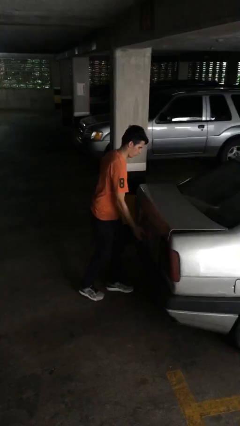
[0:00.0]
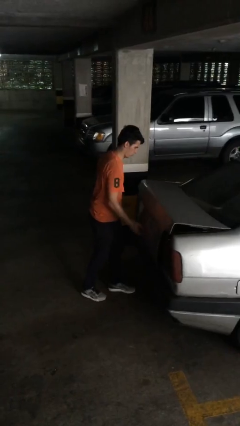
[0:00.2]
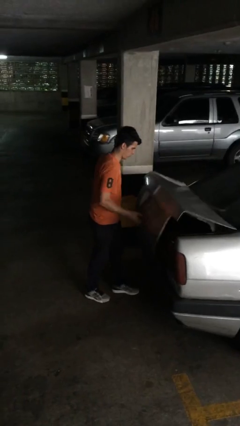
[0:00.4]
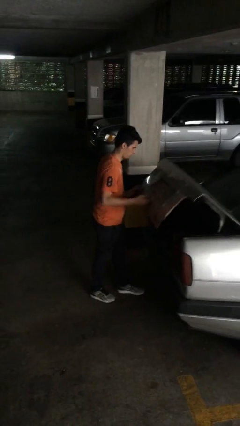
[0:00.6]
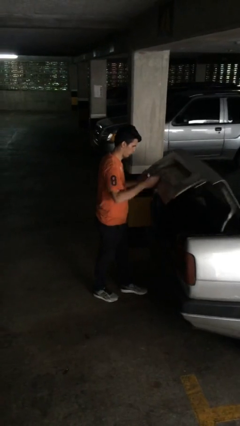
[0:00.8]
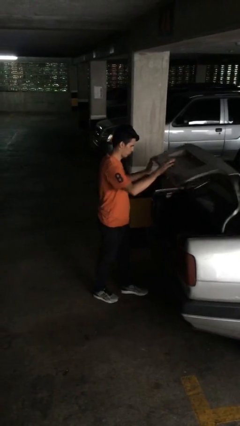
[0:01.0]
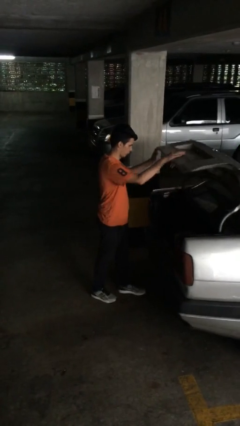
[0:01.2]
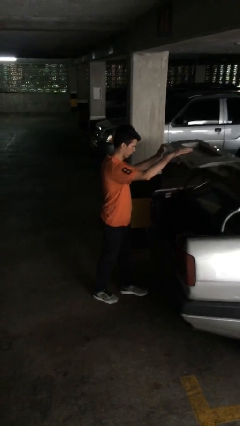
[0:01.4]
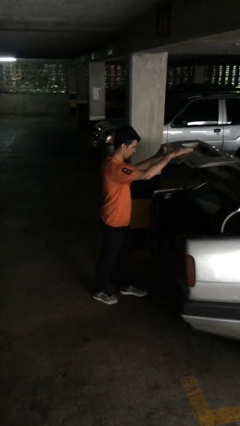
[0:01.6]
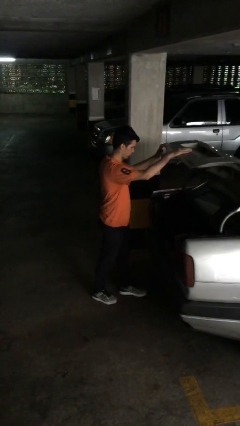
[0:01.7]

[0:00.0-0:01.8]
person opens car trunk

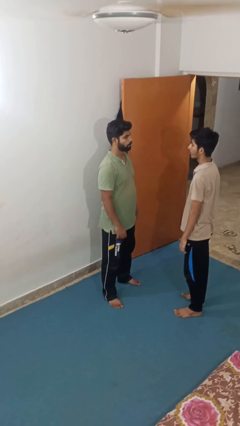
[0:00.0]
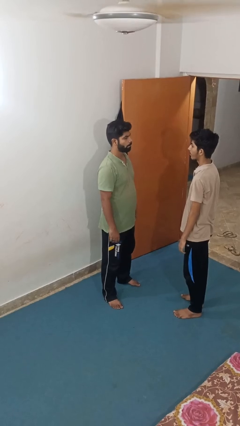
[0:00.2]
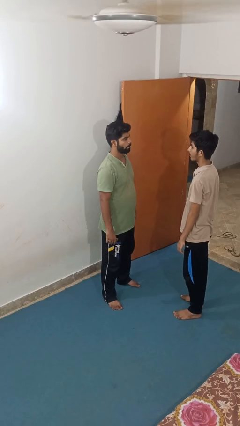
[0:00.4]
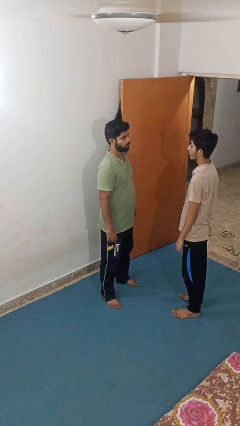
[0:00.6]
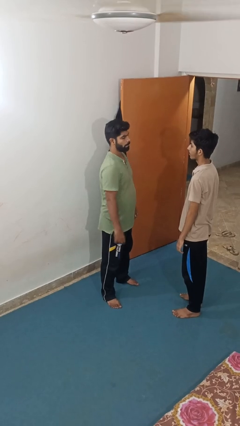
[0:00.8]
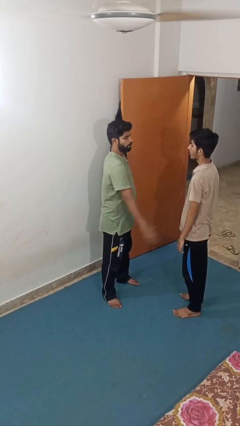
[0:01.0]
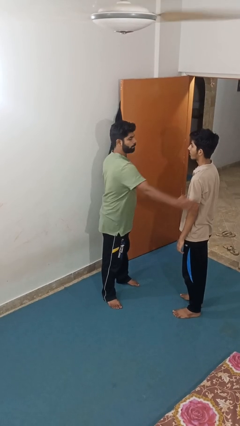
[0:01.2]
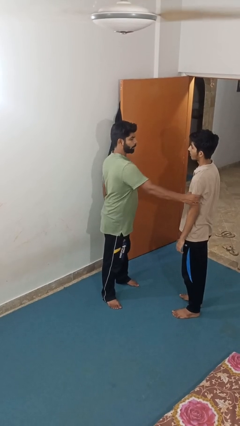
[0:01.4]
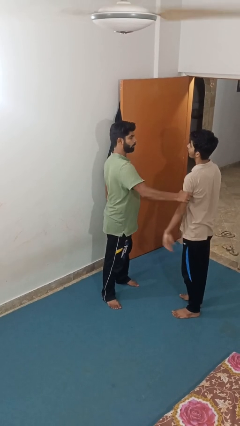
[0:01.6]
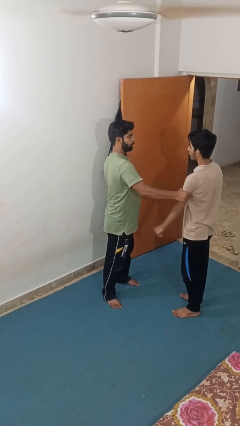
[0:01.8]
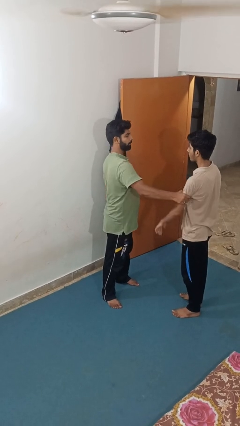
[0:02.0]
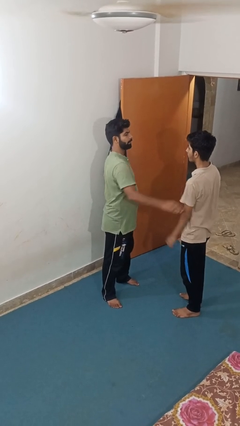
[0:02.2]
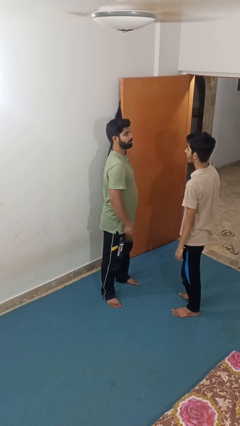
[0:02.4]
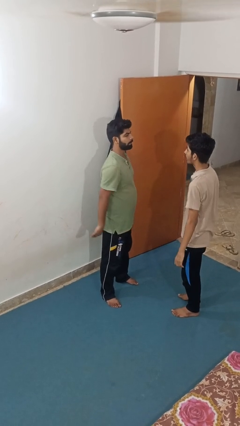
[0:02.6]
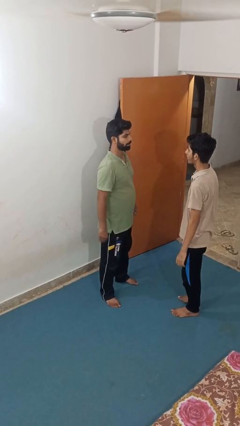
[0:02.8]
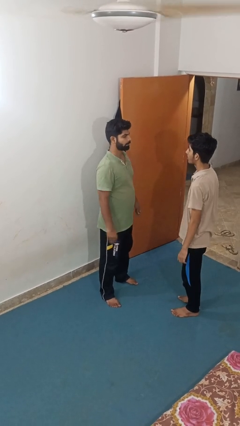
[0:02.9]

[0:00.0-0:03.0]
person grabs person by bicep

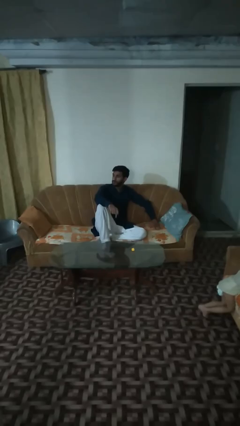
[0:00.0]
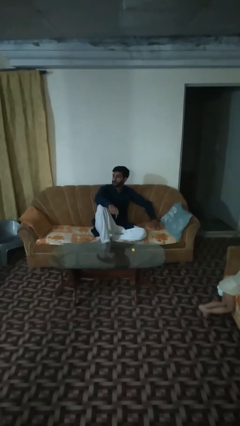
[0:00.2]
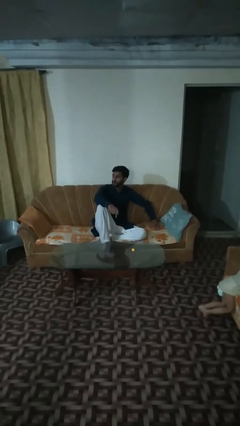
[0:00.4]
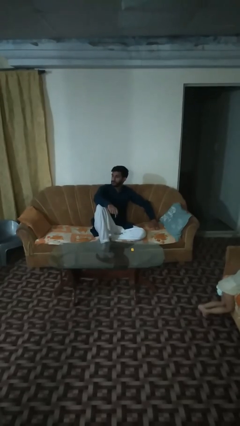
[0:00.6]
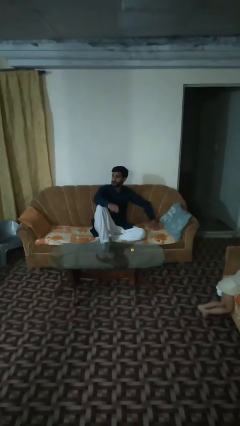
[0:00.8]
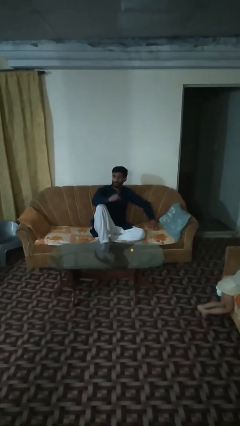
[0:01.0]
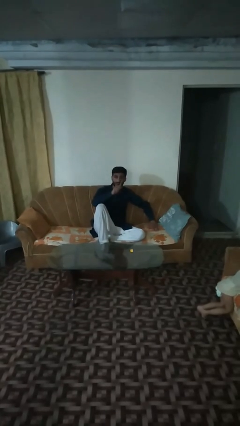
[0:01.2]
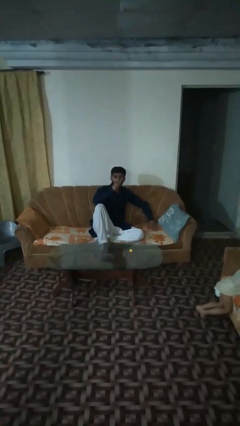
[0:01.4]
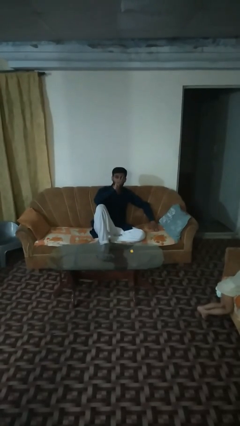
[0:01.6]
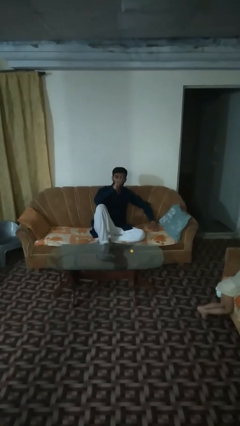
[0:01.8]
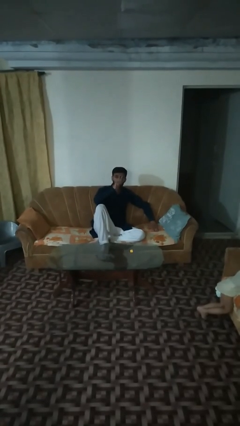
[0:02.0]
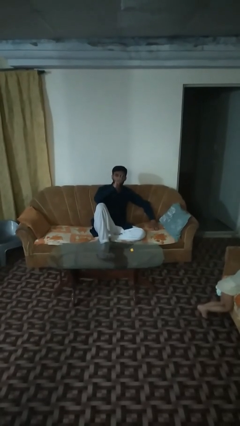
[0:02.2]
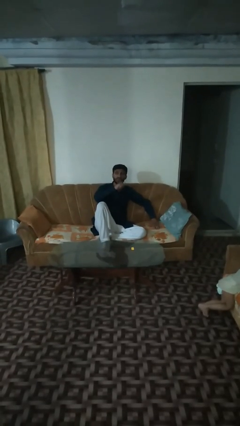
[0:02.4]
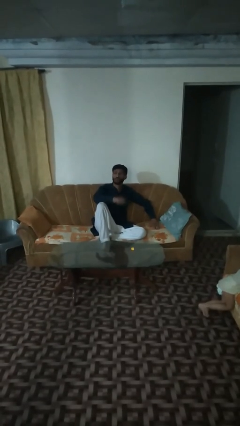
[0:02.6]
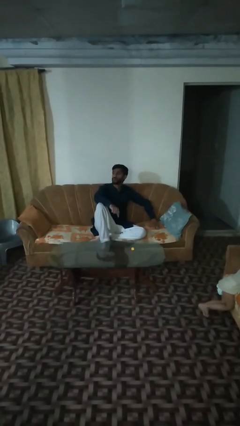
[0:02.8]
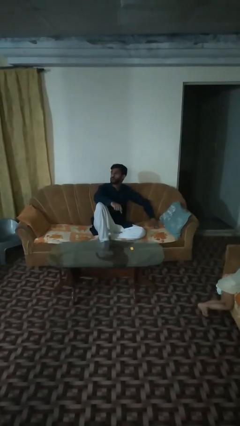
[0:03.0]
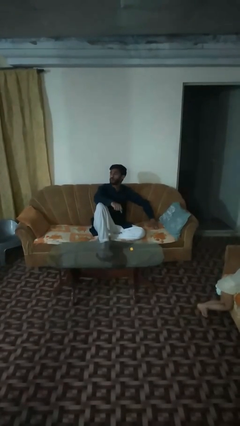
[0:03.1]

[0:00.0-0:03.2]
person vapes

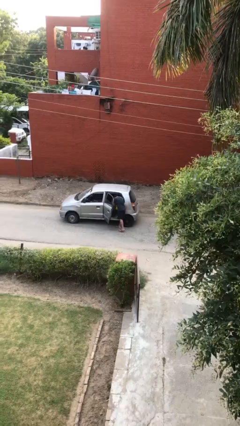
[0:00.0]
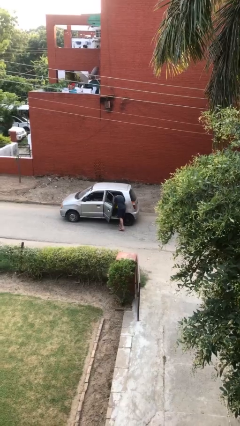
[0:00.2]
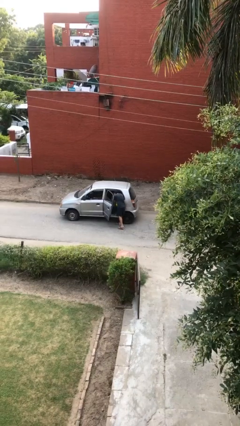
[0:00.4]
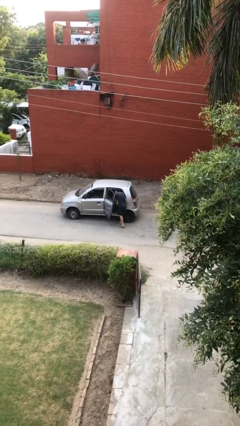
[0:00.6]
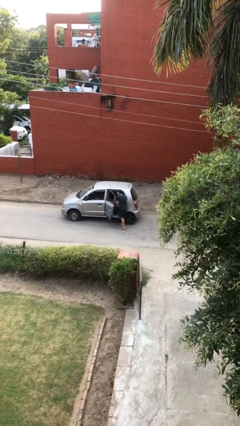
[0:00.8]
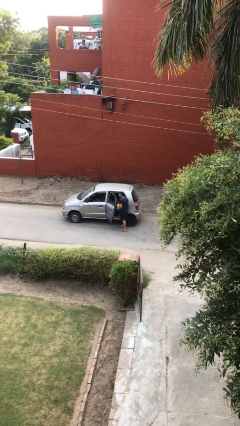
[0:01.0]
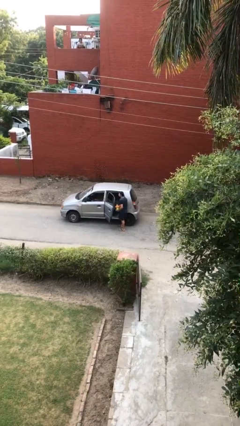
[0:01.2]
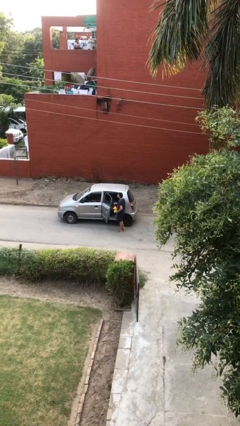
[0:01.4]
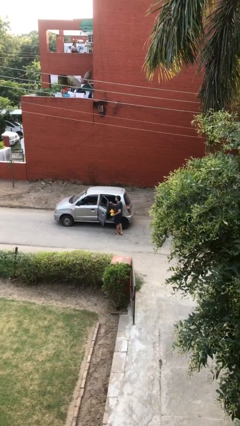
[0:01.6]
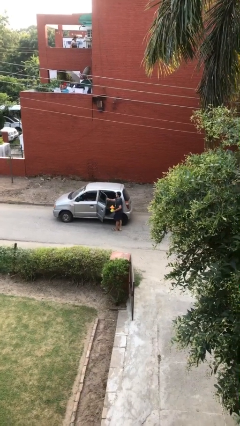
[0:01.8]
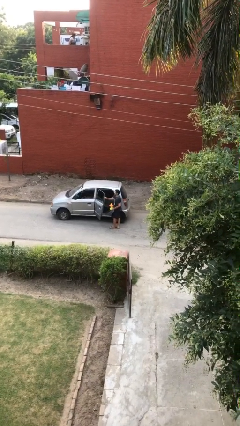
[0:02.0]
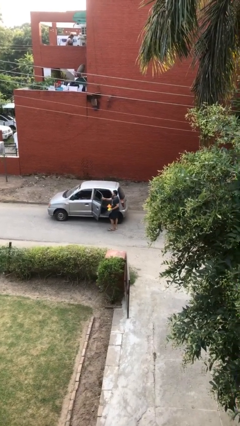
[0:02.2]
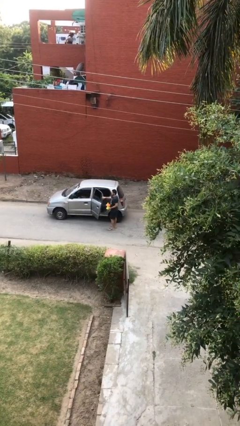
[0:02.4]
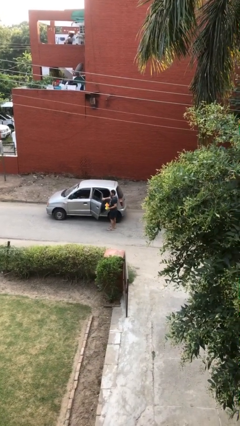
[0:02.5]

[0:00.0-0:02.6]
person unloads car

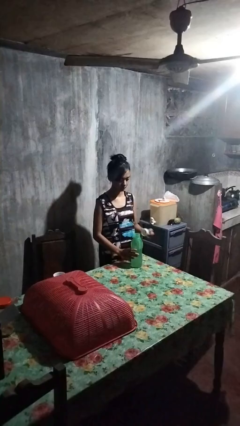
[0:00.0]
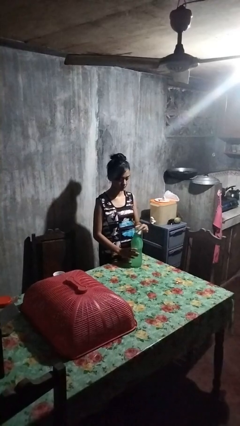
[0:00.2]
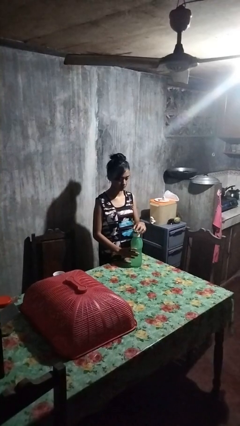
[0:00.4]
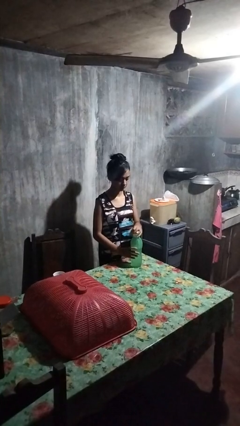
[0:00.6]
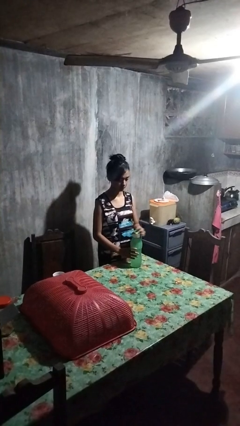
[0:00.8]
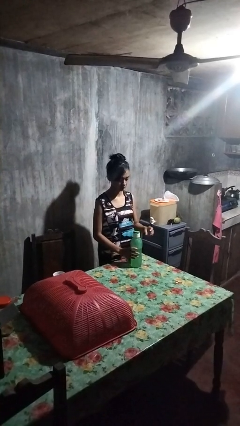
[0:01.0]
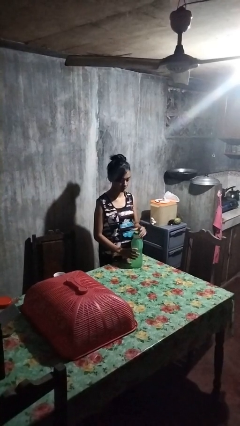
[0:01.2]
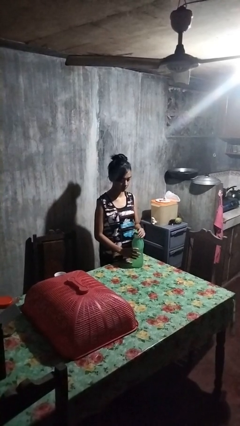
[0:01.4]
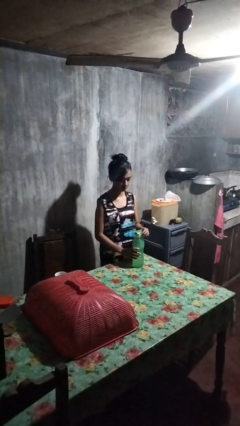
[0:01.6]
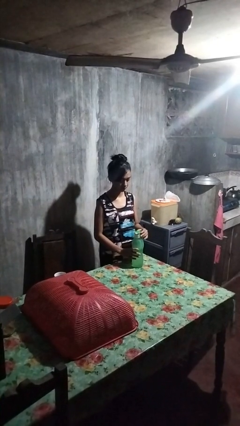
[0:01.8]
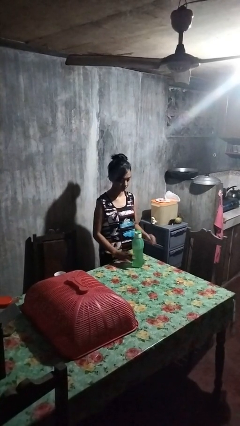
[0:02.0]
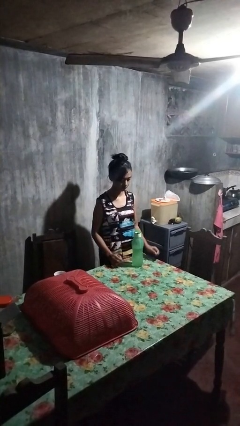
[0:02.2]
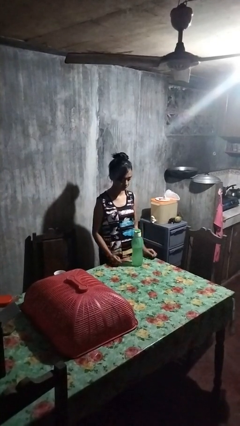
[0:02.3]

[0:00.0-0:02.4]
person screws lid to bottle

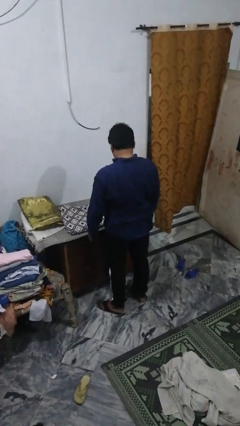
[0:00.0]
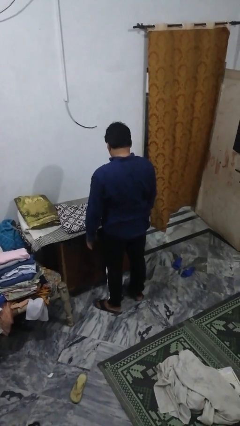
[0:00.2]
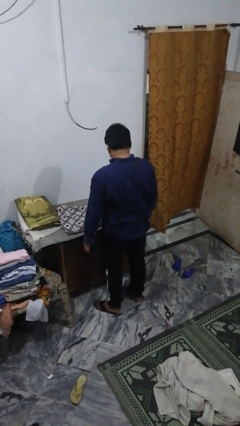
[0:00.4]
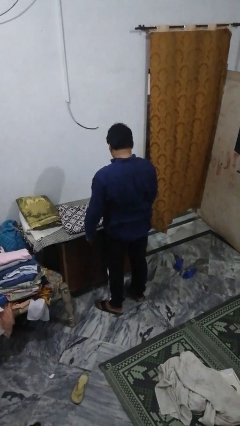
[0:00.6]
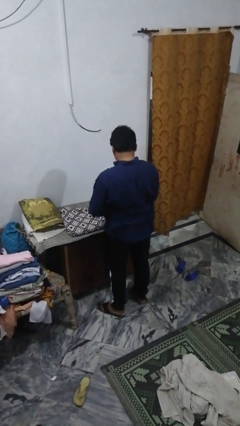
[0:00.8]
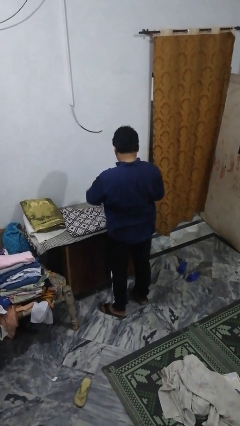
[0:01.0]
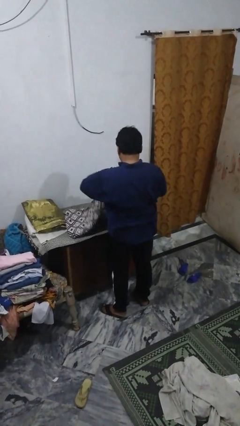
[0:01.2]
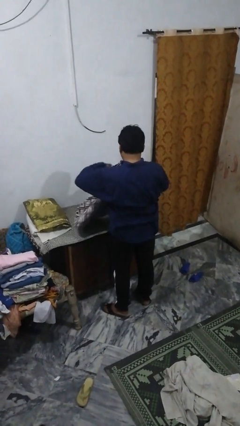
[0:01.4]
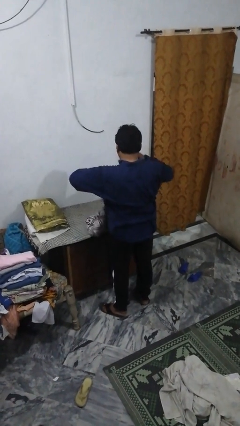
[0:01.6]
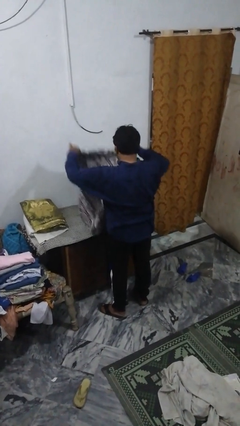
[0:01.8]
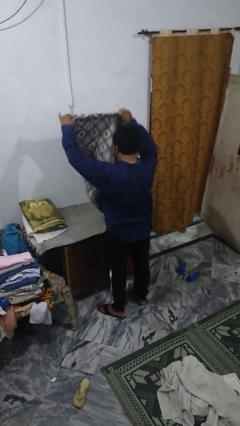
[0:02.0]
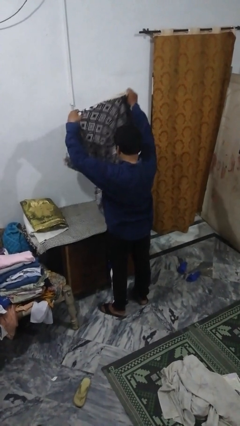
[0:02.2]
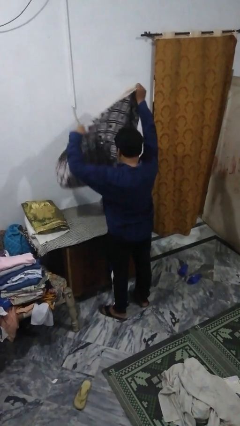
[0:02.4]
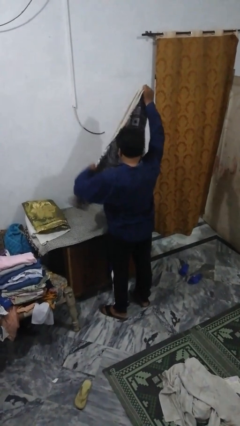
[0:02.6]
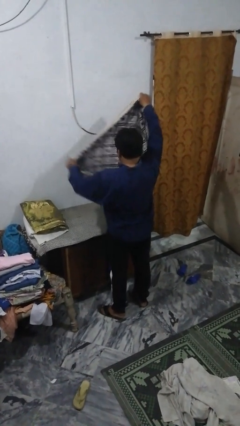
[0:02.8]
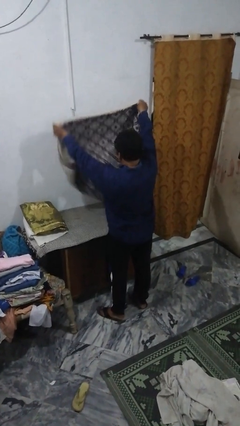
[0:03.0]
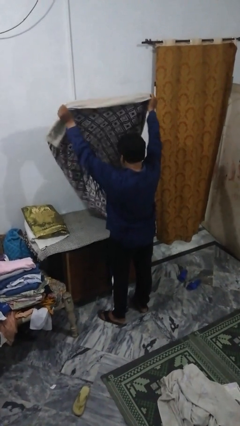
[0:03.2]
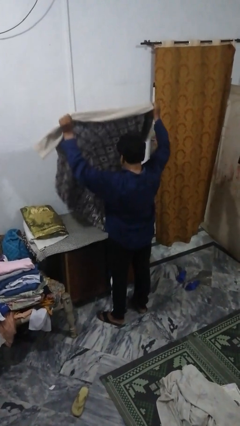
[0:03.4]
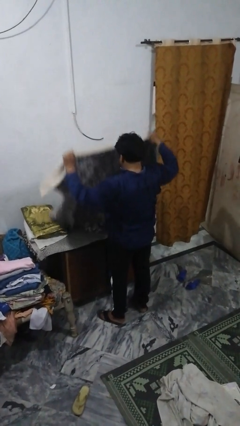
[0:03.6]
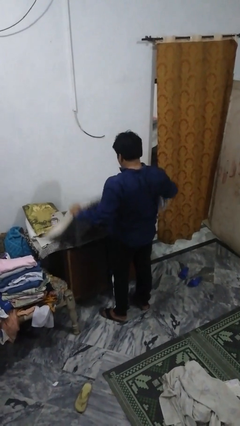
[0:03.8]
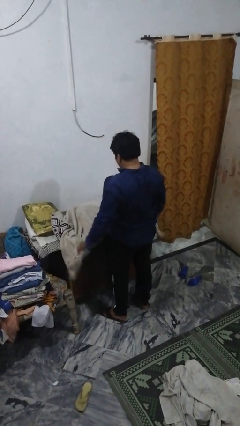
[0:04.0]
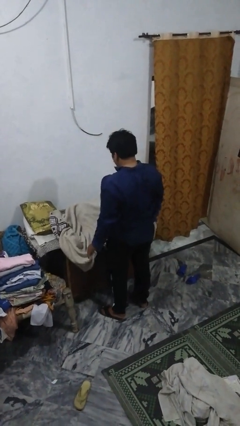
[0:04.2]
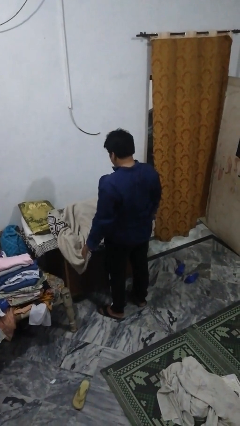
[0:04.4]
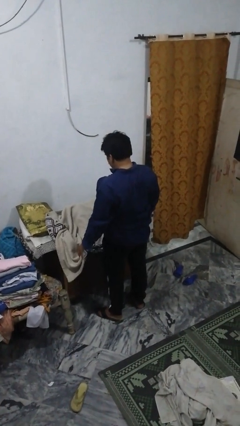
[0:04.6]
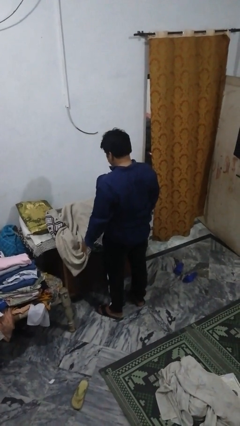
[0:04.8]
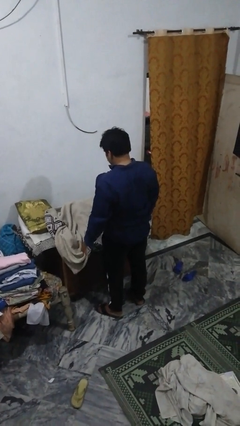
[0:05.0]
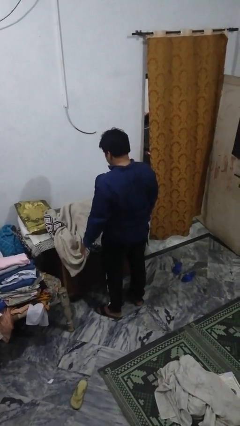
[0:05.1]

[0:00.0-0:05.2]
person unfolds blanket
